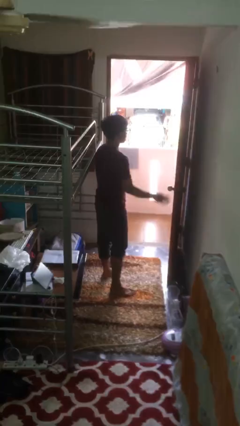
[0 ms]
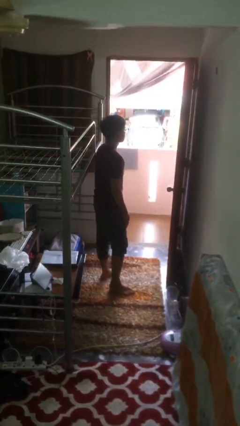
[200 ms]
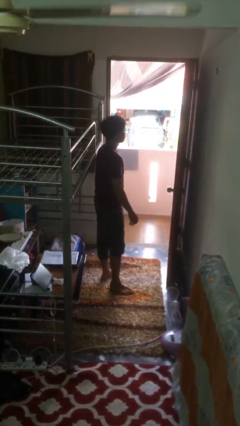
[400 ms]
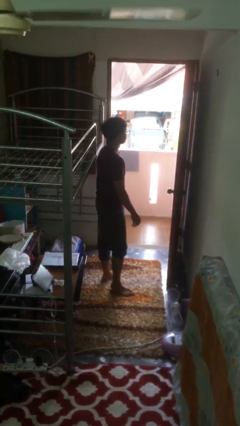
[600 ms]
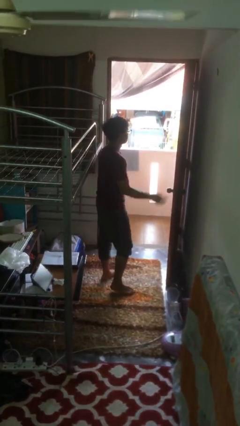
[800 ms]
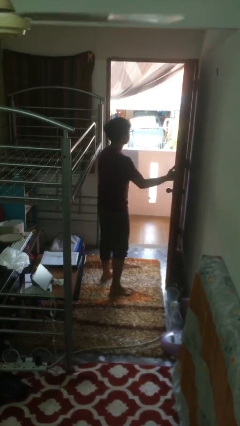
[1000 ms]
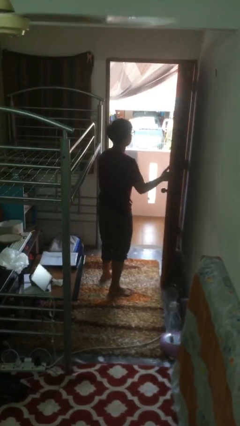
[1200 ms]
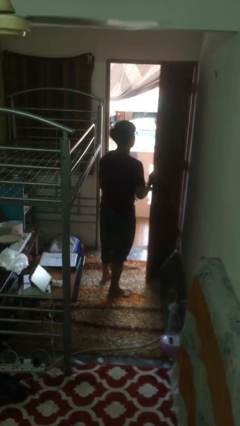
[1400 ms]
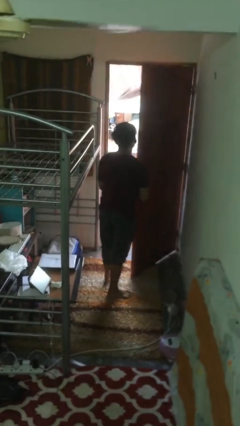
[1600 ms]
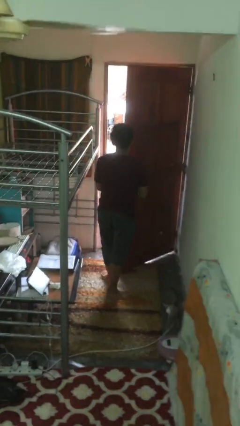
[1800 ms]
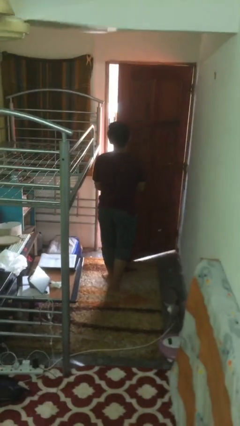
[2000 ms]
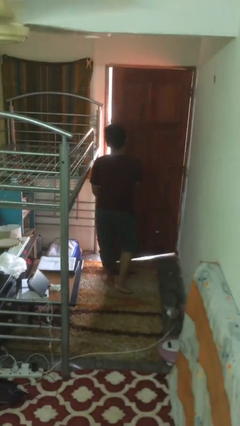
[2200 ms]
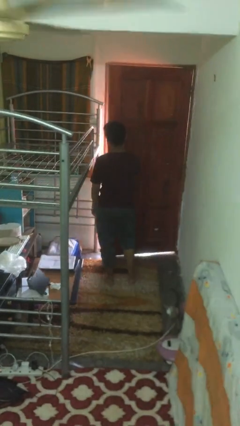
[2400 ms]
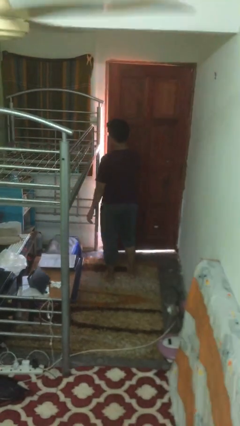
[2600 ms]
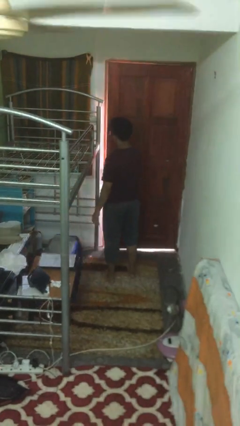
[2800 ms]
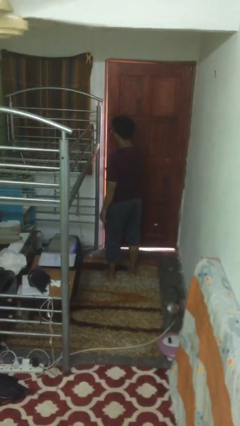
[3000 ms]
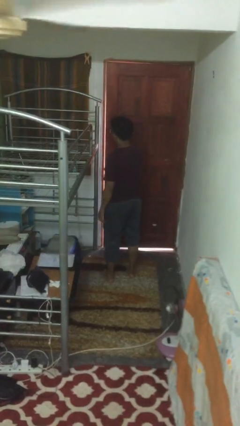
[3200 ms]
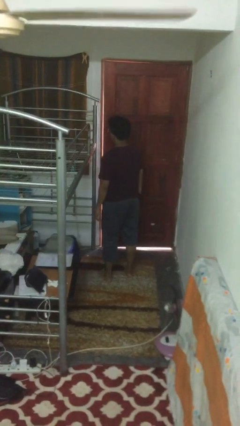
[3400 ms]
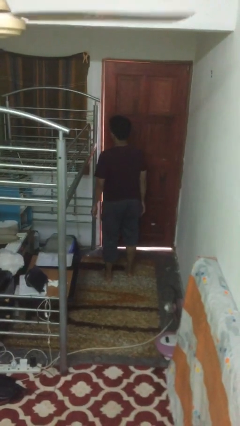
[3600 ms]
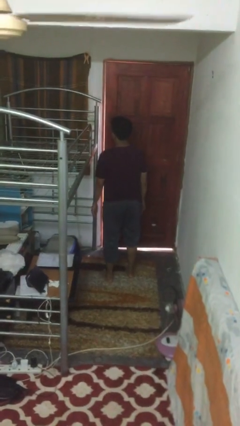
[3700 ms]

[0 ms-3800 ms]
person closes facility door

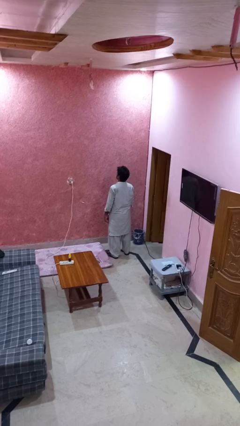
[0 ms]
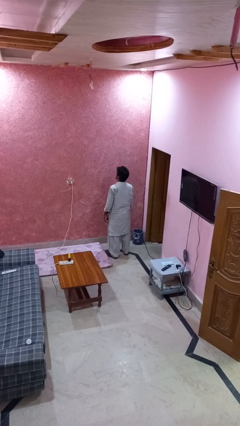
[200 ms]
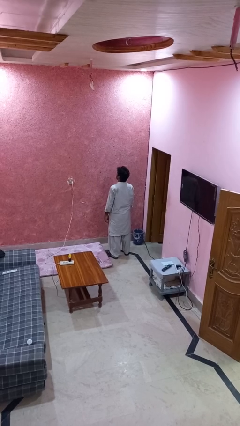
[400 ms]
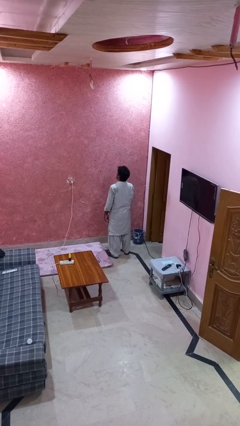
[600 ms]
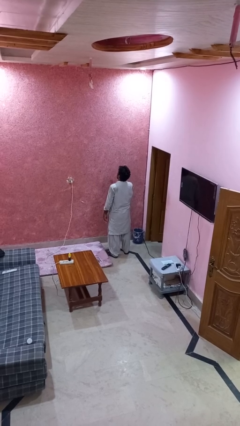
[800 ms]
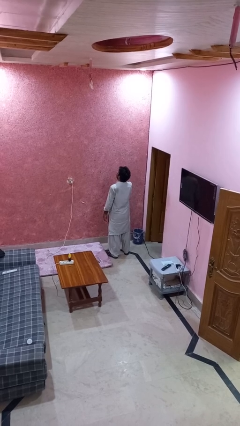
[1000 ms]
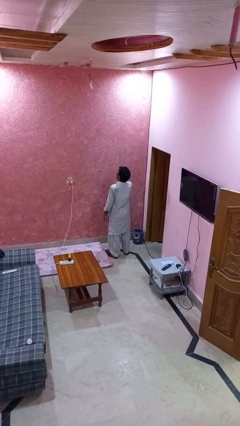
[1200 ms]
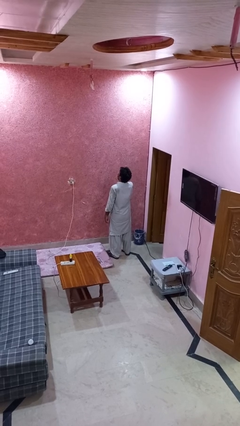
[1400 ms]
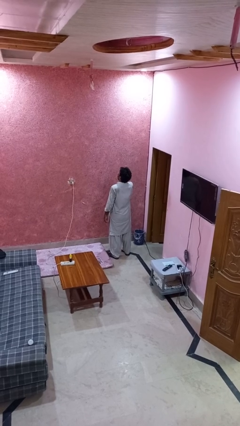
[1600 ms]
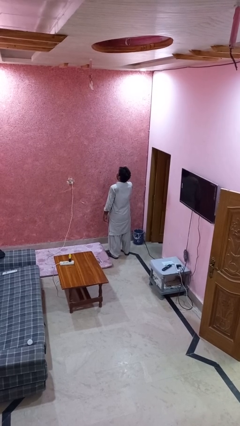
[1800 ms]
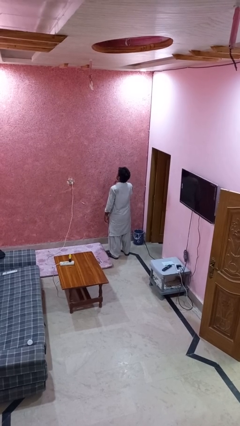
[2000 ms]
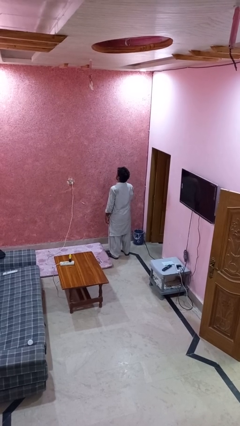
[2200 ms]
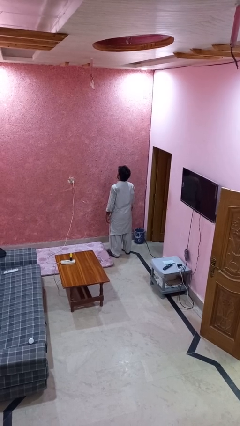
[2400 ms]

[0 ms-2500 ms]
person yawns

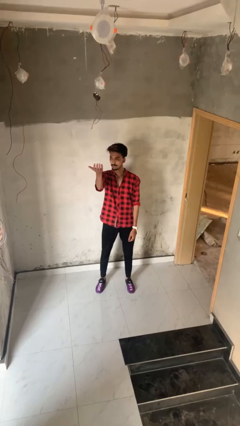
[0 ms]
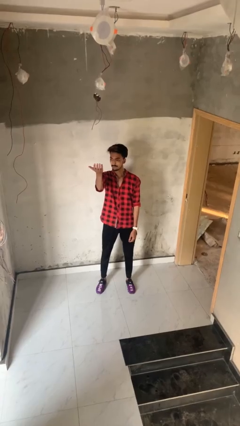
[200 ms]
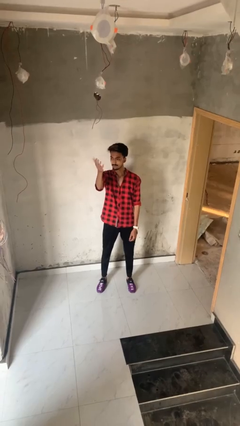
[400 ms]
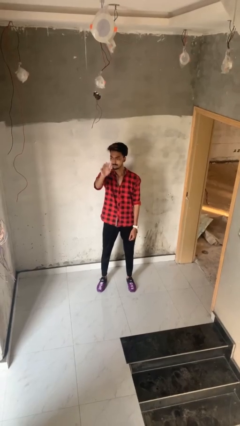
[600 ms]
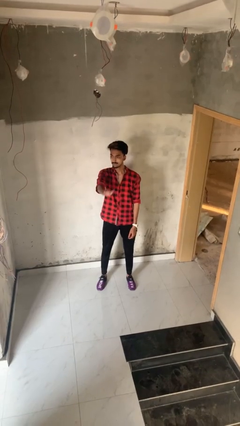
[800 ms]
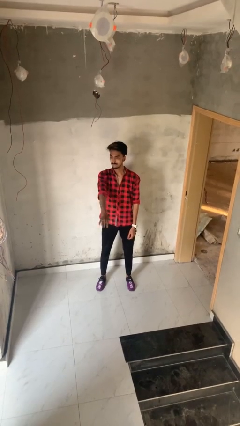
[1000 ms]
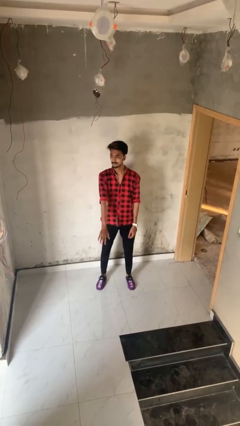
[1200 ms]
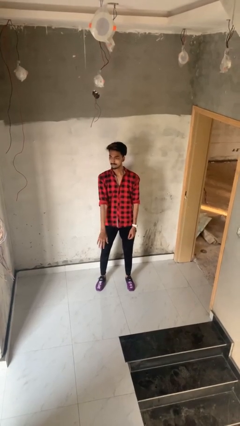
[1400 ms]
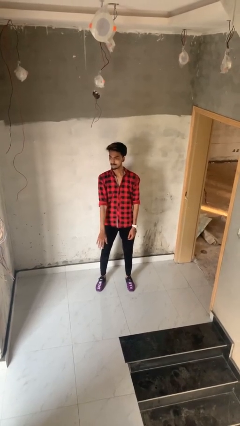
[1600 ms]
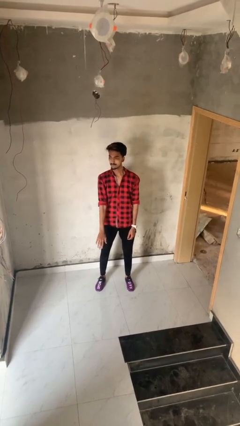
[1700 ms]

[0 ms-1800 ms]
person gestures swipe down

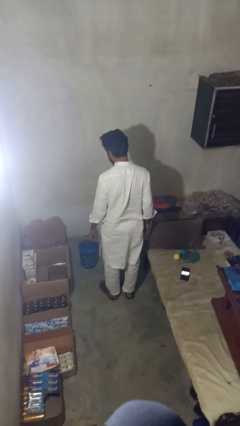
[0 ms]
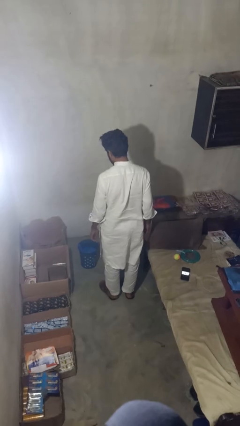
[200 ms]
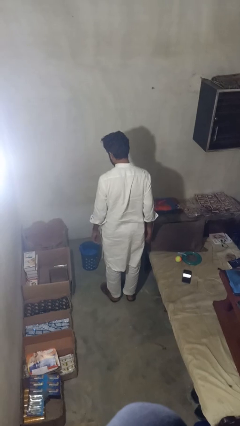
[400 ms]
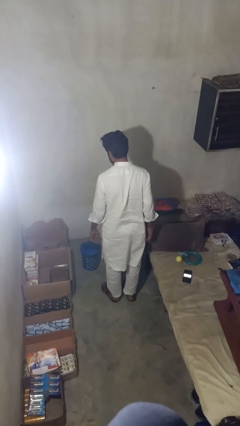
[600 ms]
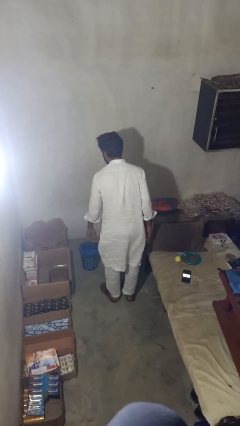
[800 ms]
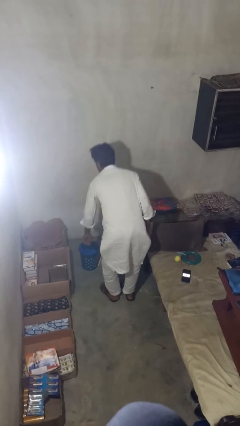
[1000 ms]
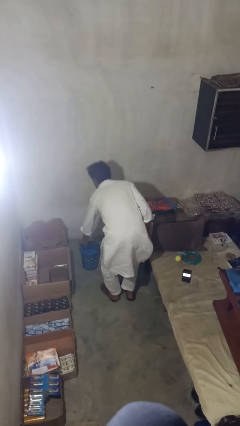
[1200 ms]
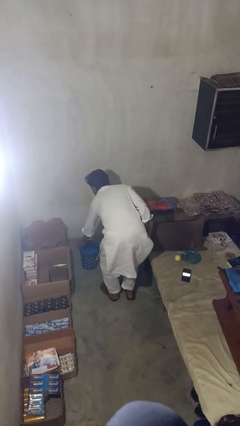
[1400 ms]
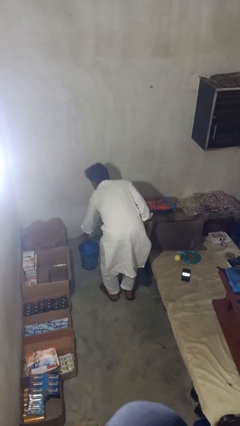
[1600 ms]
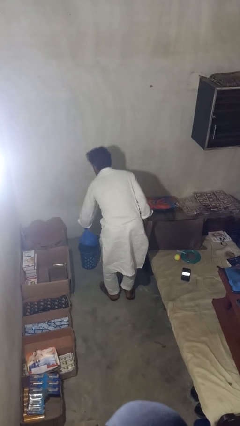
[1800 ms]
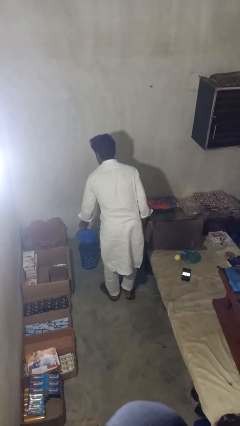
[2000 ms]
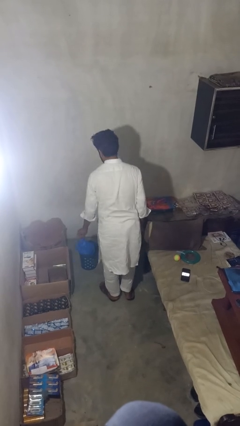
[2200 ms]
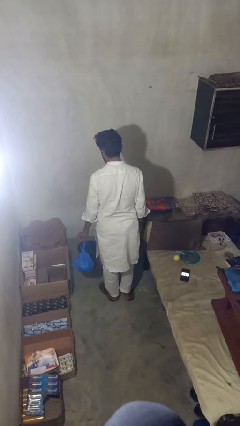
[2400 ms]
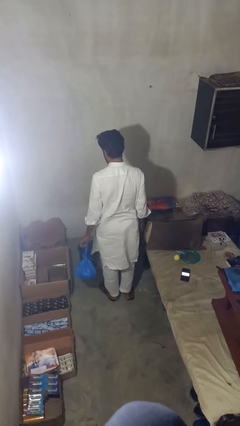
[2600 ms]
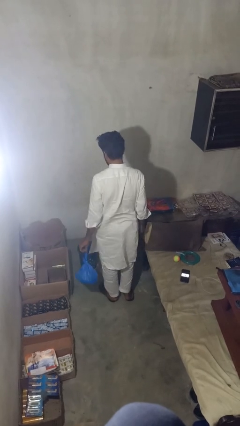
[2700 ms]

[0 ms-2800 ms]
person takes object from basket

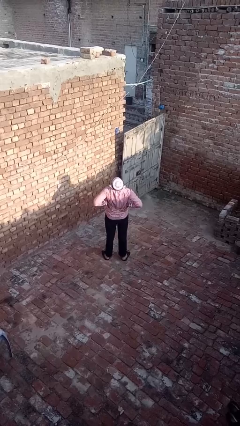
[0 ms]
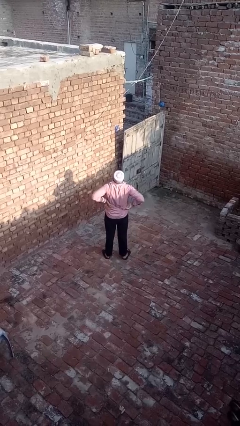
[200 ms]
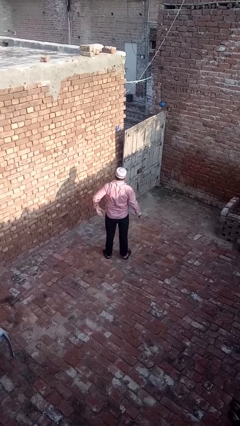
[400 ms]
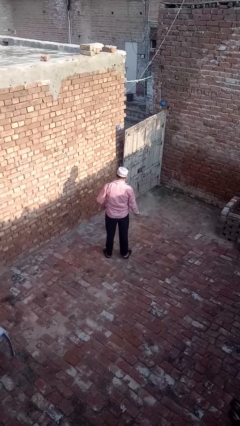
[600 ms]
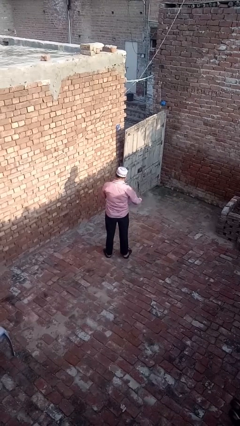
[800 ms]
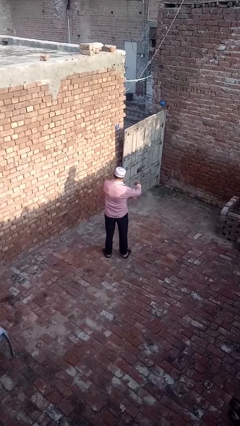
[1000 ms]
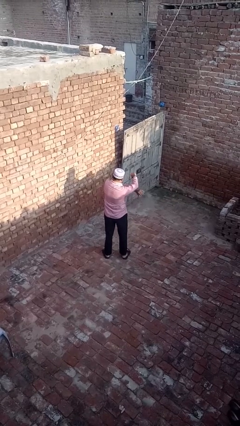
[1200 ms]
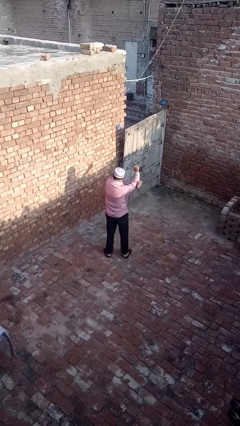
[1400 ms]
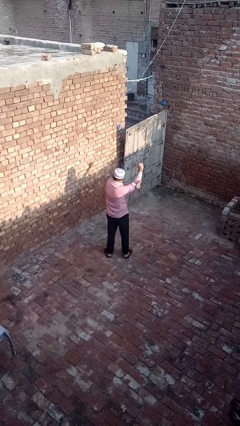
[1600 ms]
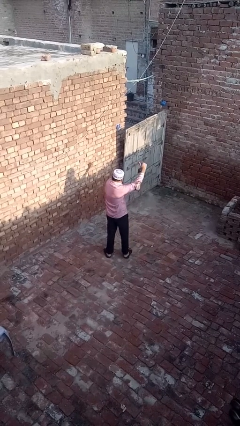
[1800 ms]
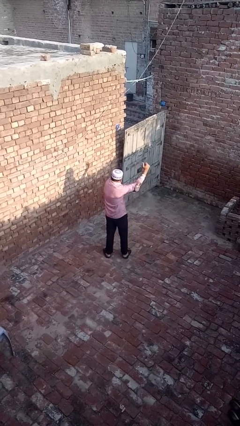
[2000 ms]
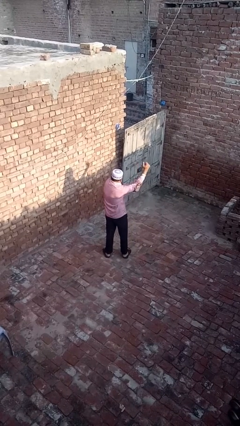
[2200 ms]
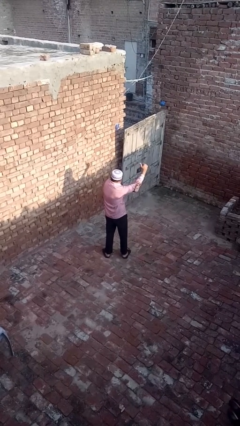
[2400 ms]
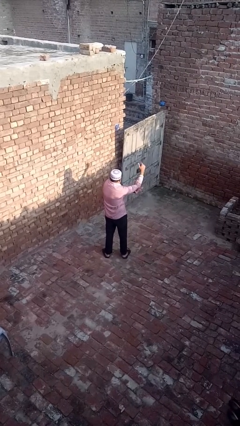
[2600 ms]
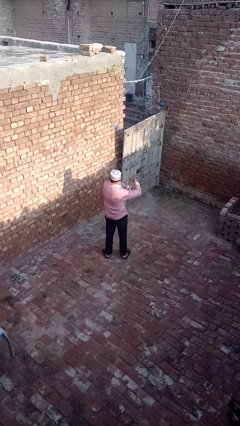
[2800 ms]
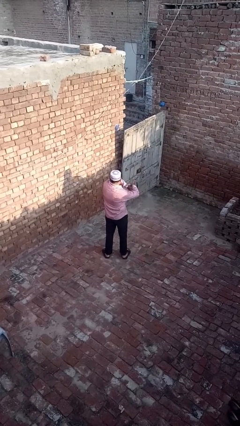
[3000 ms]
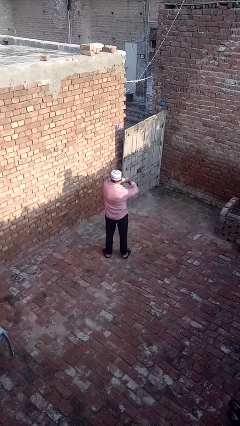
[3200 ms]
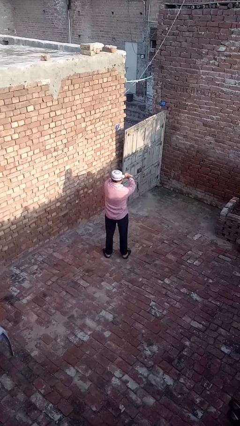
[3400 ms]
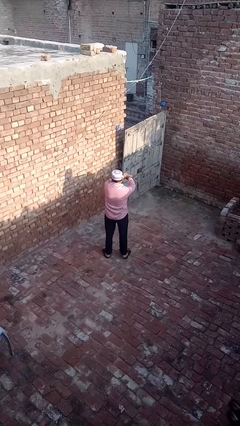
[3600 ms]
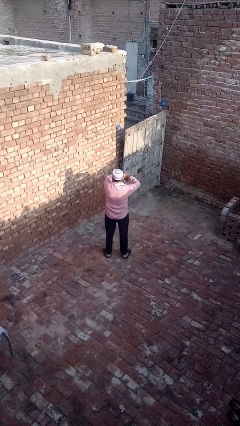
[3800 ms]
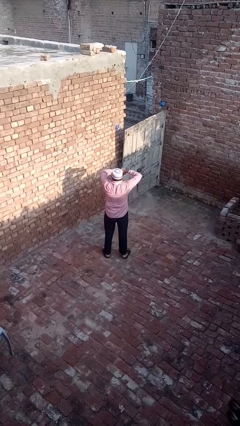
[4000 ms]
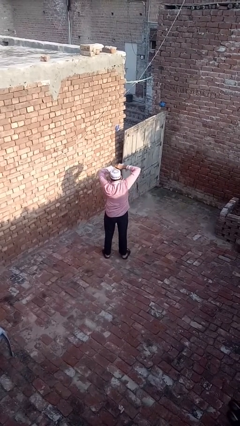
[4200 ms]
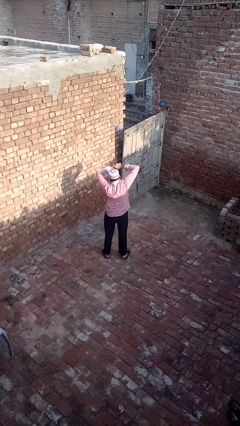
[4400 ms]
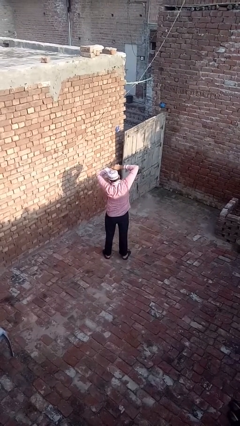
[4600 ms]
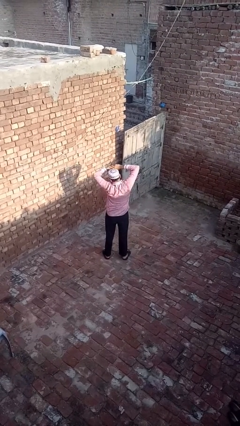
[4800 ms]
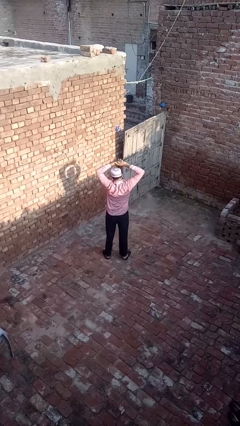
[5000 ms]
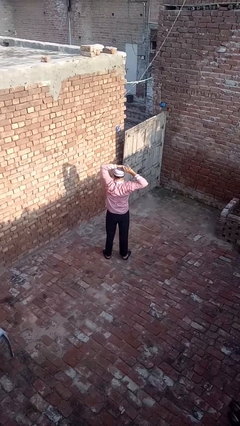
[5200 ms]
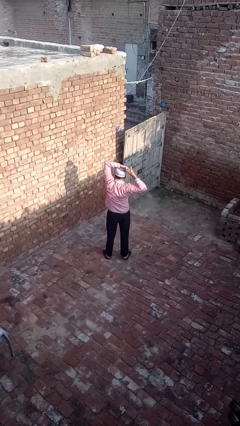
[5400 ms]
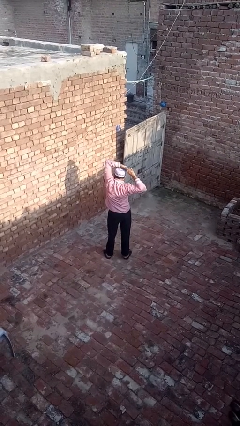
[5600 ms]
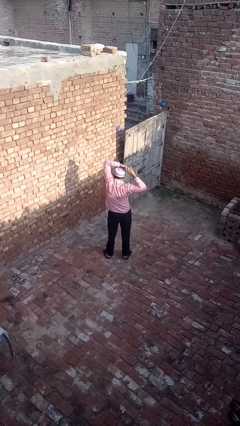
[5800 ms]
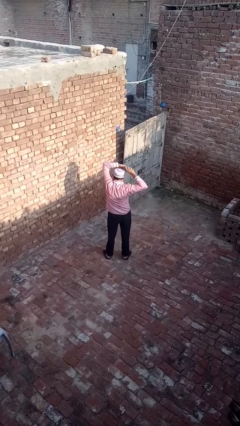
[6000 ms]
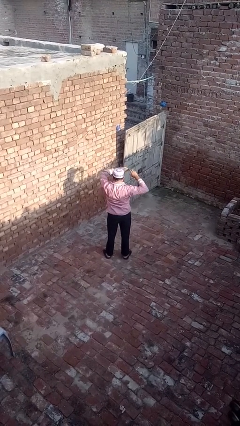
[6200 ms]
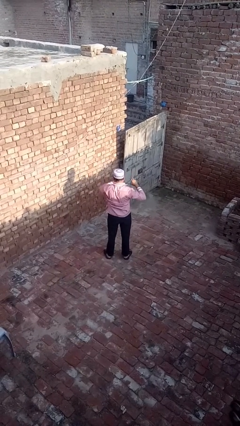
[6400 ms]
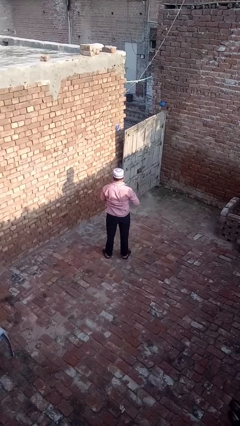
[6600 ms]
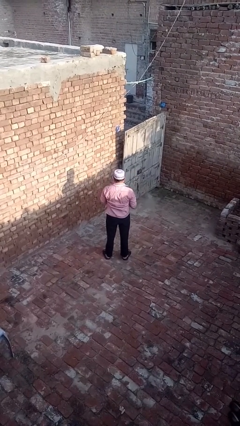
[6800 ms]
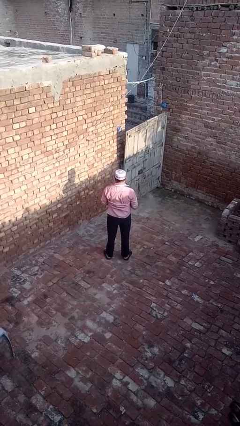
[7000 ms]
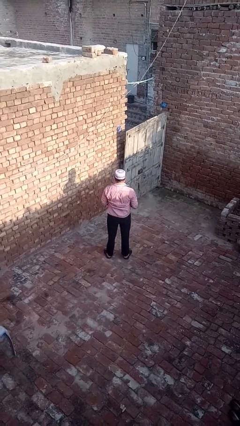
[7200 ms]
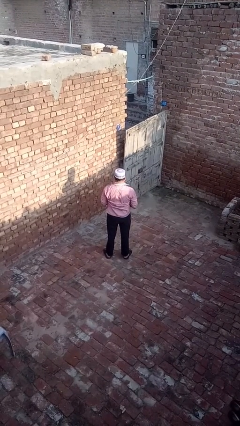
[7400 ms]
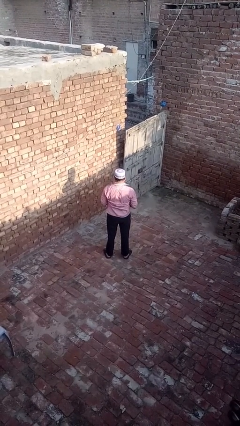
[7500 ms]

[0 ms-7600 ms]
person stretches arms to side
